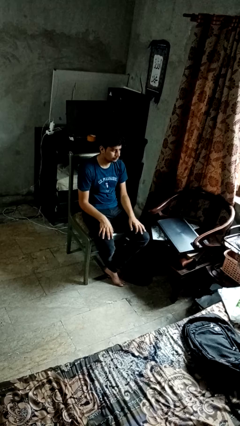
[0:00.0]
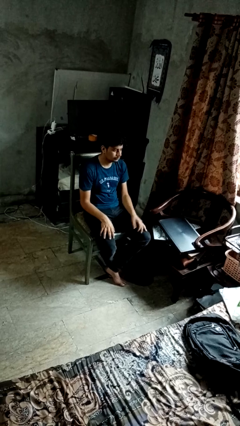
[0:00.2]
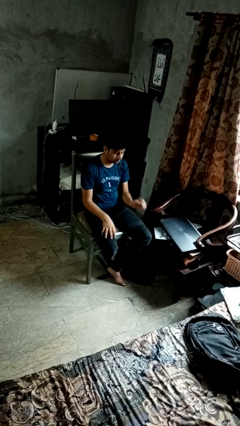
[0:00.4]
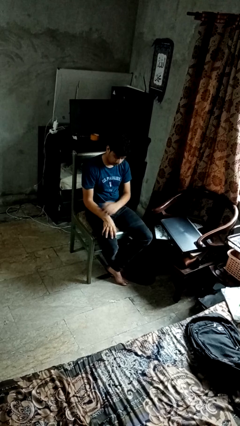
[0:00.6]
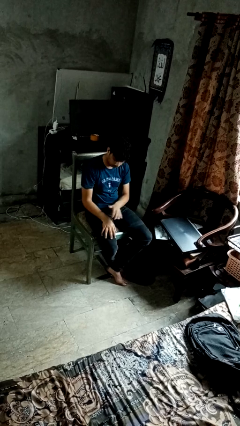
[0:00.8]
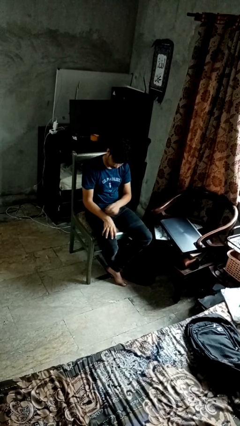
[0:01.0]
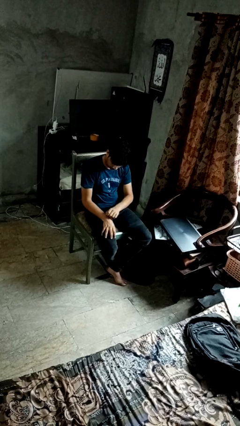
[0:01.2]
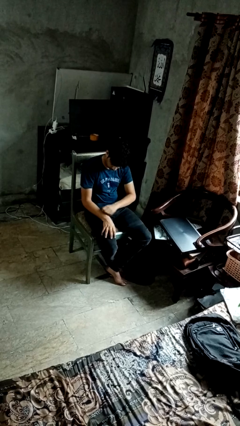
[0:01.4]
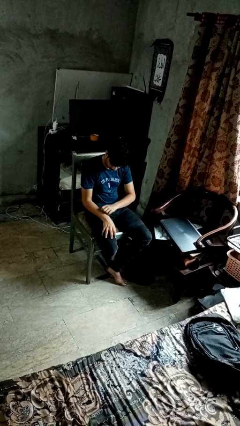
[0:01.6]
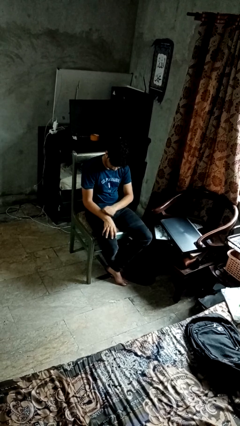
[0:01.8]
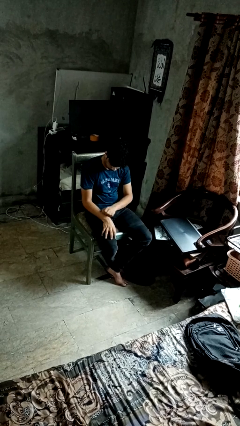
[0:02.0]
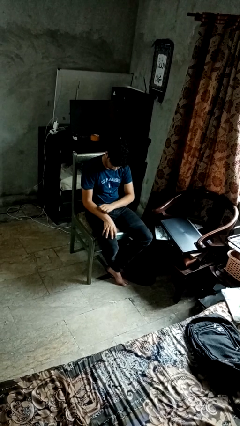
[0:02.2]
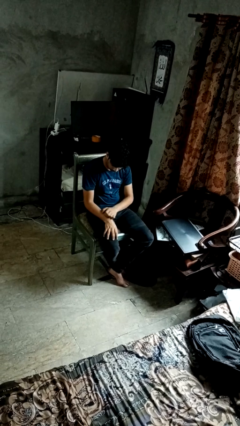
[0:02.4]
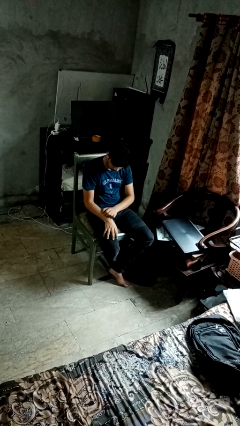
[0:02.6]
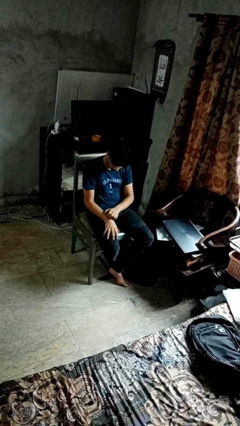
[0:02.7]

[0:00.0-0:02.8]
person swats bug

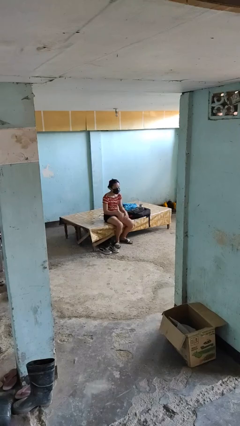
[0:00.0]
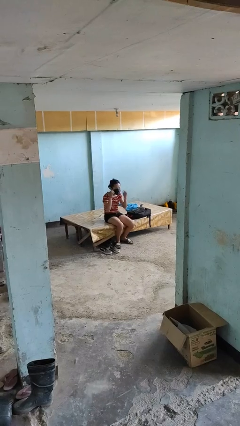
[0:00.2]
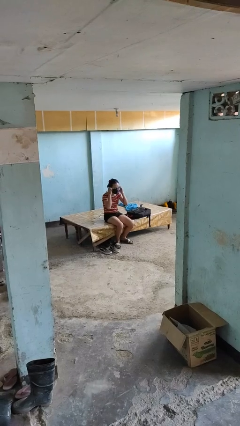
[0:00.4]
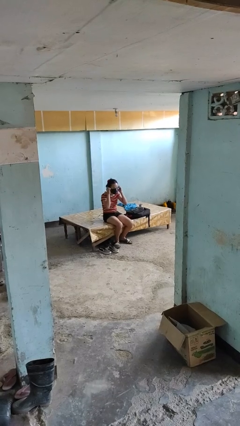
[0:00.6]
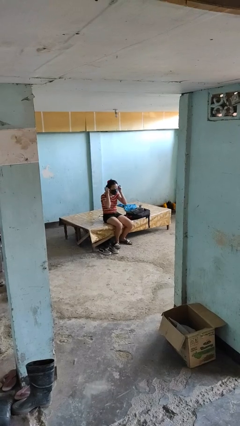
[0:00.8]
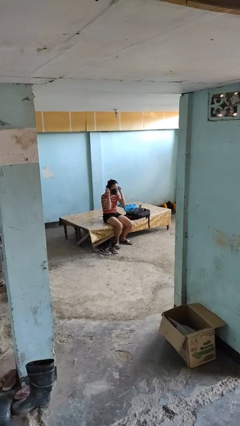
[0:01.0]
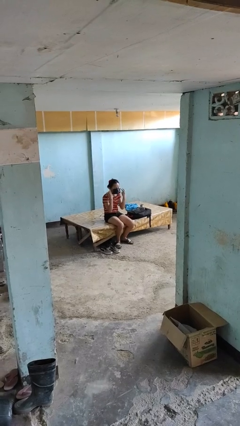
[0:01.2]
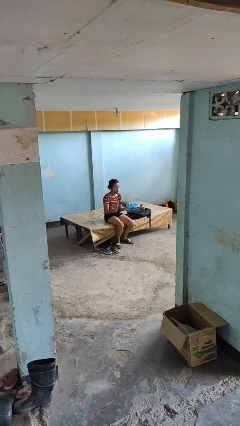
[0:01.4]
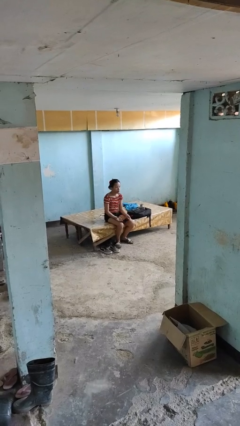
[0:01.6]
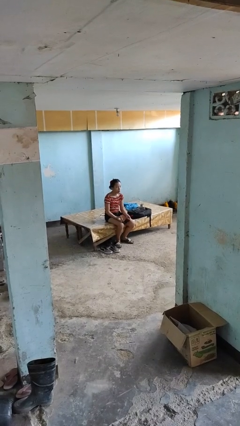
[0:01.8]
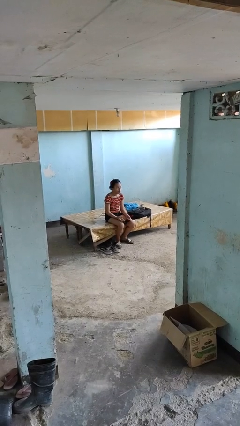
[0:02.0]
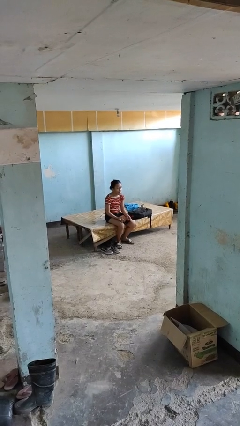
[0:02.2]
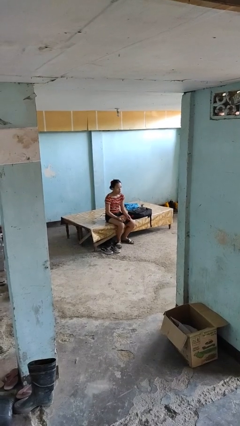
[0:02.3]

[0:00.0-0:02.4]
person takes off facemask

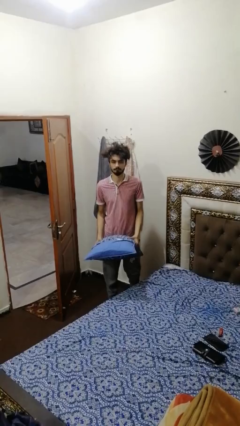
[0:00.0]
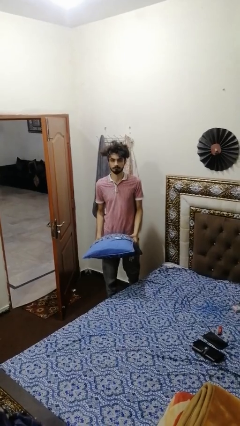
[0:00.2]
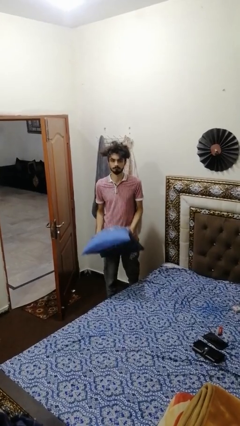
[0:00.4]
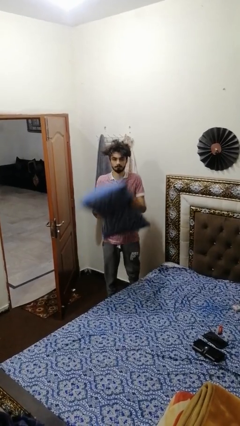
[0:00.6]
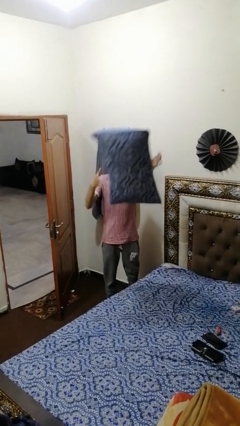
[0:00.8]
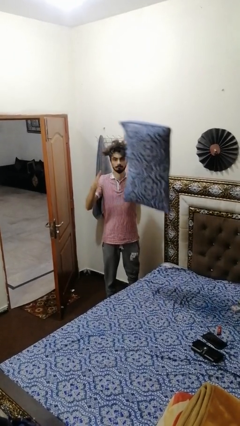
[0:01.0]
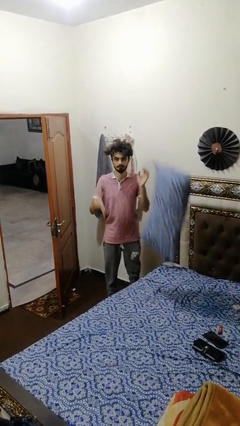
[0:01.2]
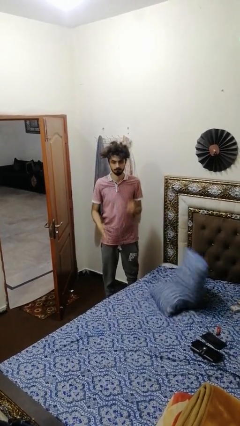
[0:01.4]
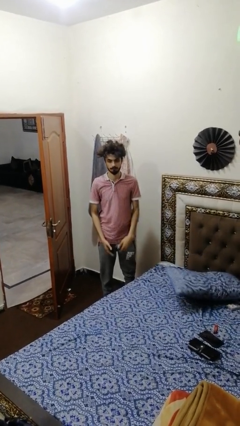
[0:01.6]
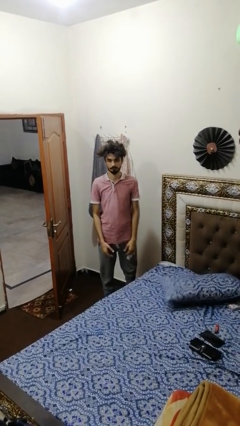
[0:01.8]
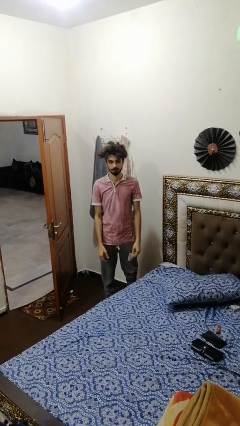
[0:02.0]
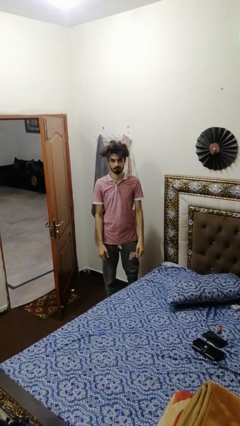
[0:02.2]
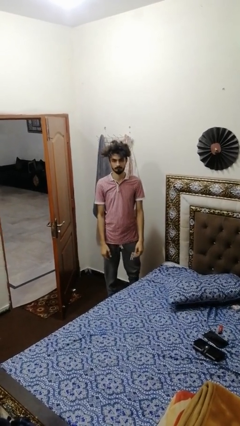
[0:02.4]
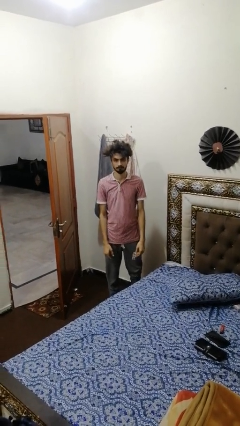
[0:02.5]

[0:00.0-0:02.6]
person throws object on bed

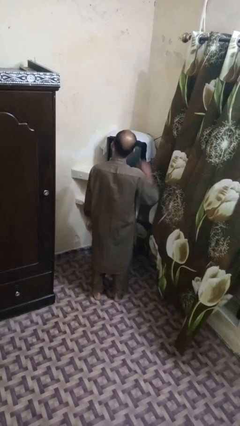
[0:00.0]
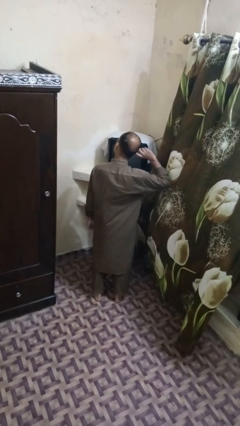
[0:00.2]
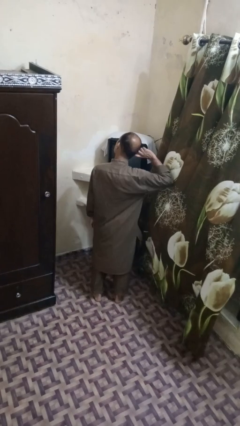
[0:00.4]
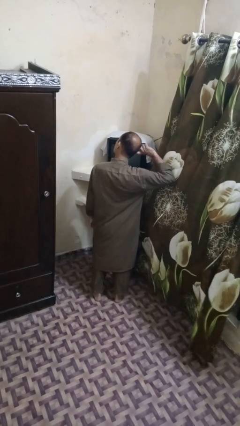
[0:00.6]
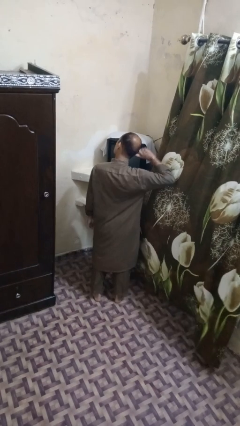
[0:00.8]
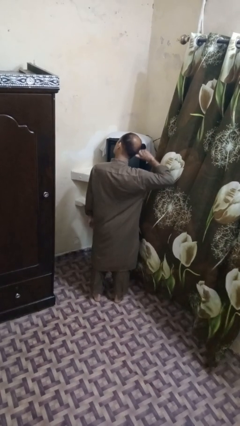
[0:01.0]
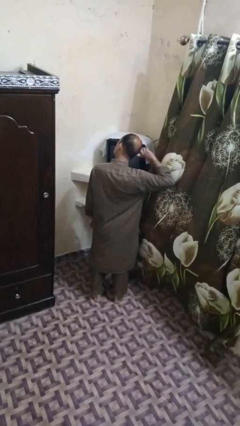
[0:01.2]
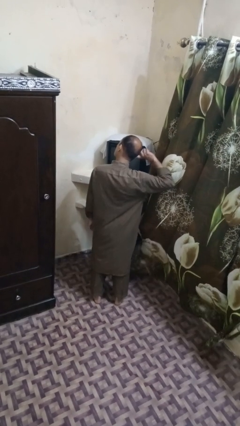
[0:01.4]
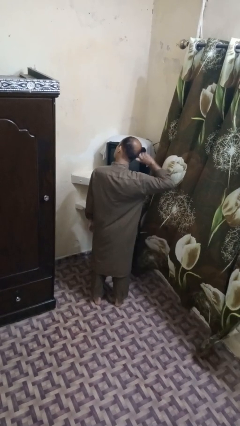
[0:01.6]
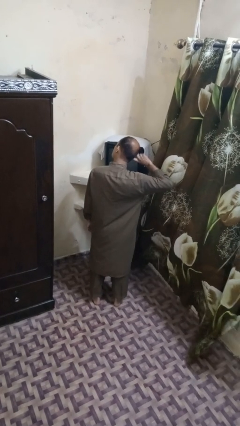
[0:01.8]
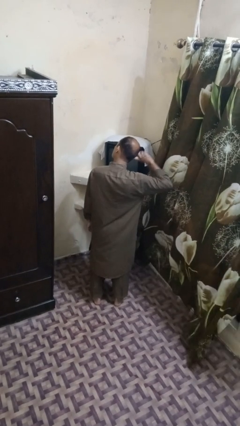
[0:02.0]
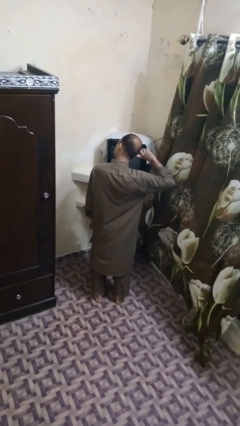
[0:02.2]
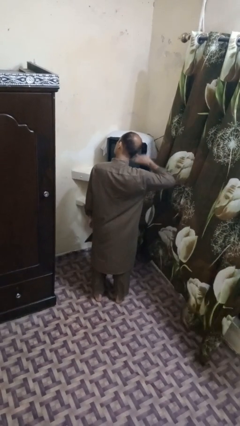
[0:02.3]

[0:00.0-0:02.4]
person puts fingers in ear

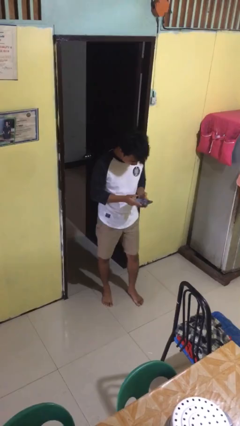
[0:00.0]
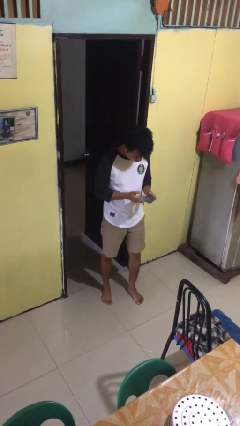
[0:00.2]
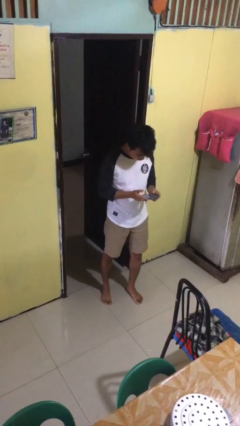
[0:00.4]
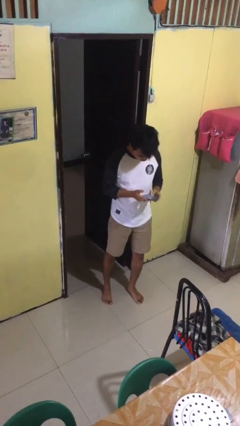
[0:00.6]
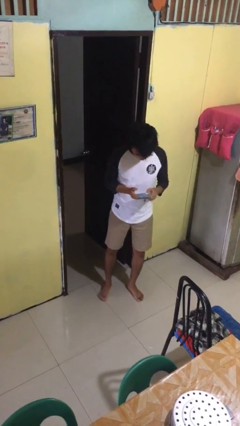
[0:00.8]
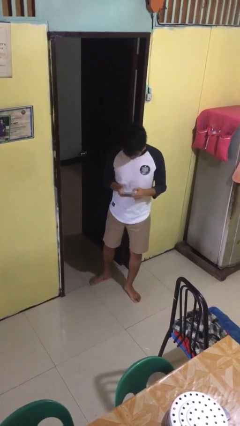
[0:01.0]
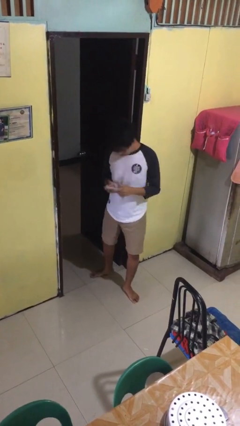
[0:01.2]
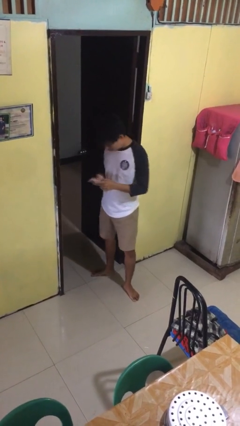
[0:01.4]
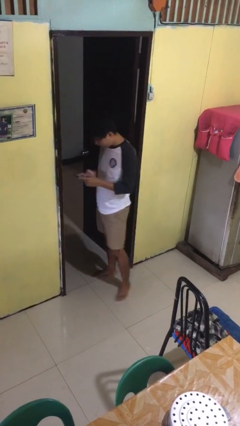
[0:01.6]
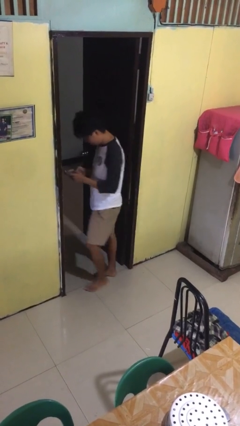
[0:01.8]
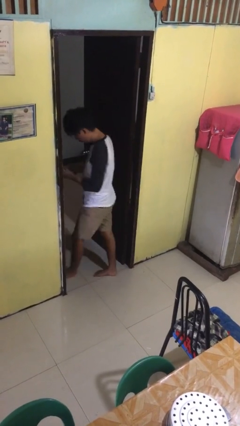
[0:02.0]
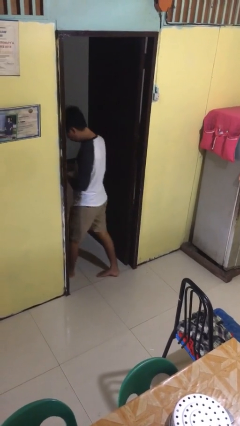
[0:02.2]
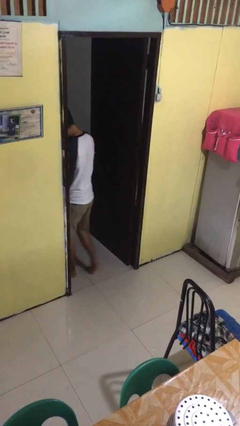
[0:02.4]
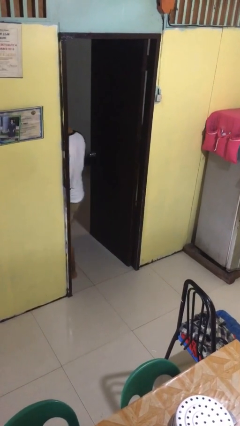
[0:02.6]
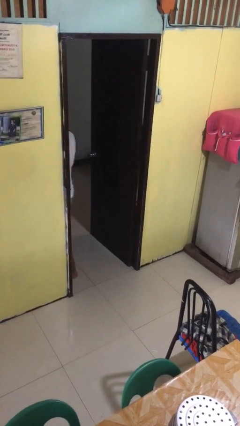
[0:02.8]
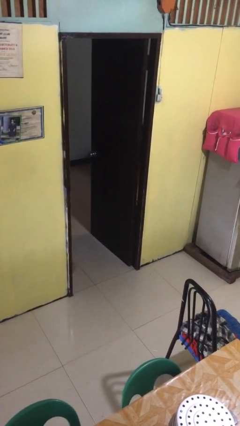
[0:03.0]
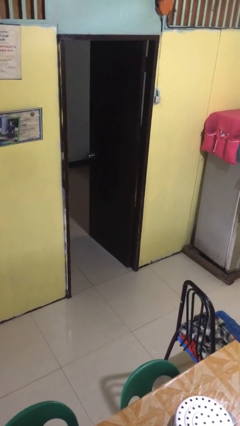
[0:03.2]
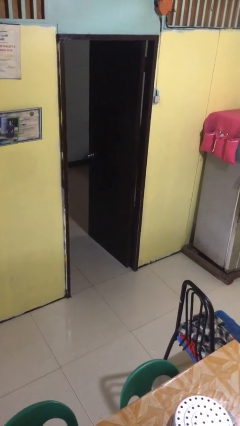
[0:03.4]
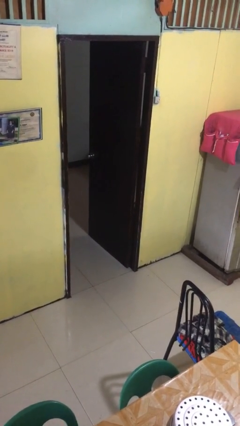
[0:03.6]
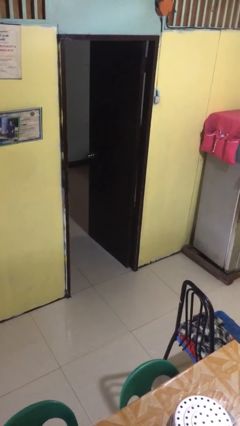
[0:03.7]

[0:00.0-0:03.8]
person exits scene through structure

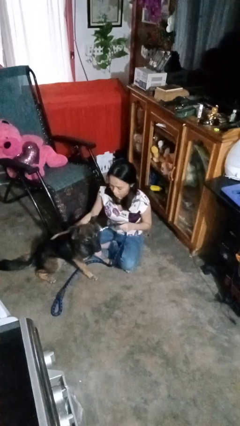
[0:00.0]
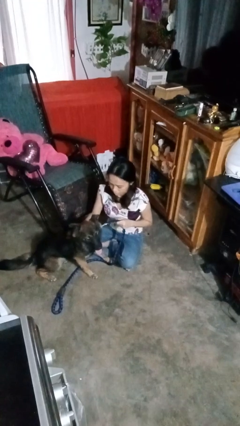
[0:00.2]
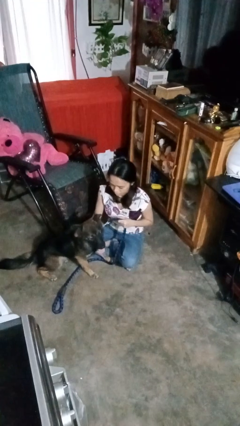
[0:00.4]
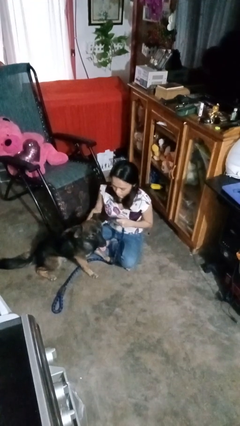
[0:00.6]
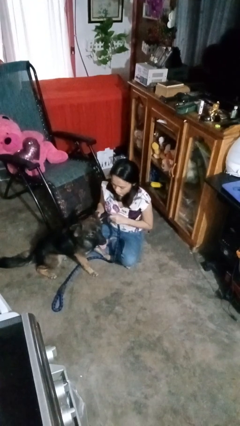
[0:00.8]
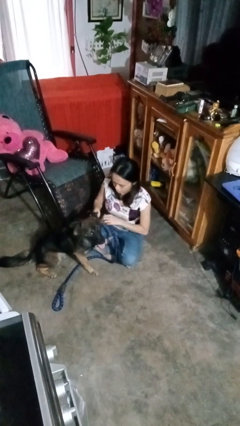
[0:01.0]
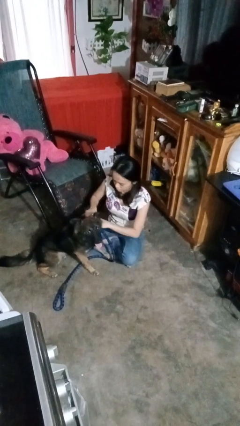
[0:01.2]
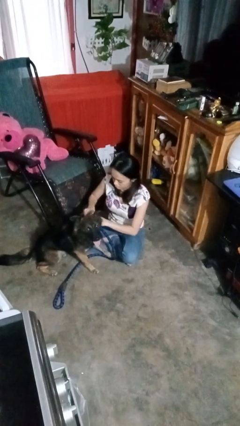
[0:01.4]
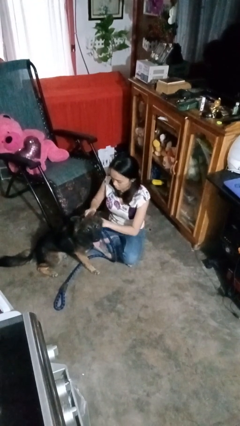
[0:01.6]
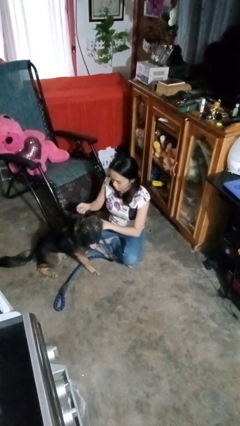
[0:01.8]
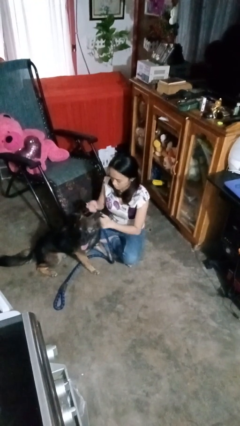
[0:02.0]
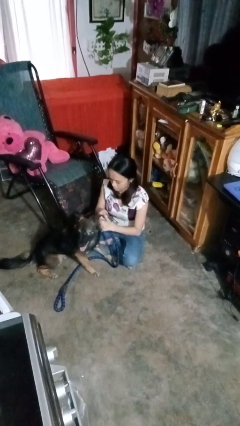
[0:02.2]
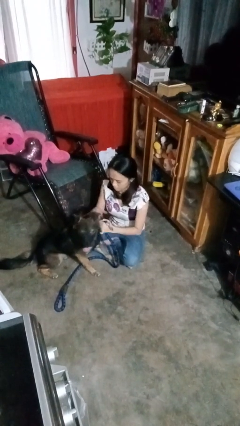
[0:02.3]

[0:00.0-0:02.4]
person unattaches leash from dog

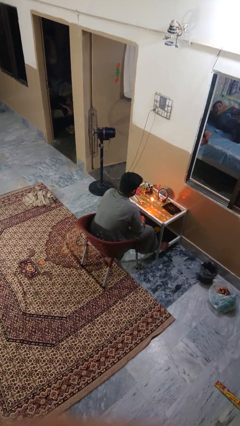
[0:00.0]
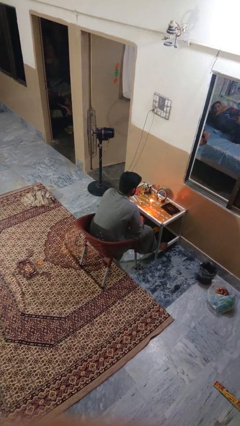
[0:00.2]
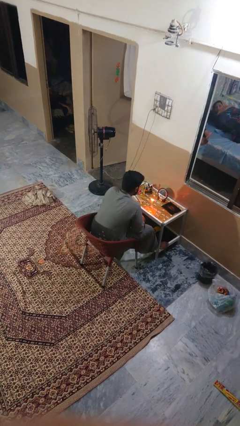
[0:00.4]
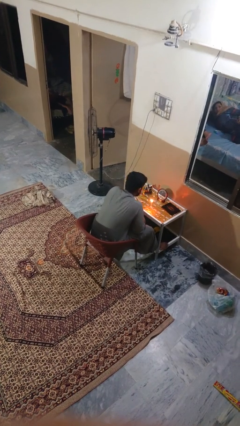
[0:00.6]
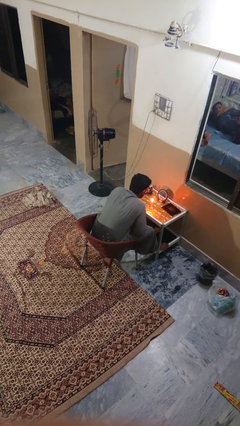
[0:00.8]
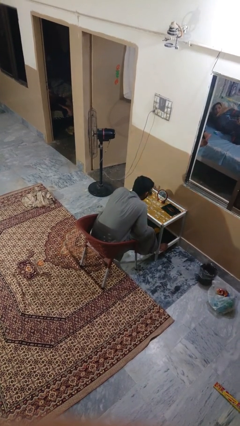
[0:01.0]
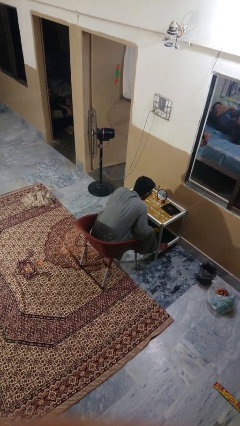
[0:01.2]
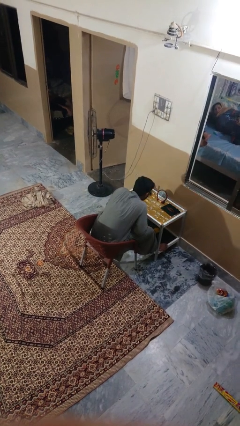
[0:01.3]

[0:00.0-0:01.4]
person extinguishes candle
